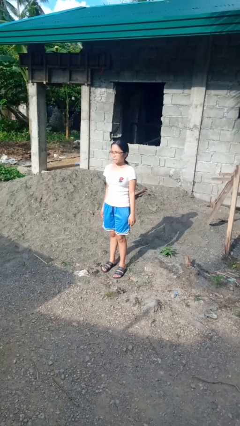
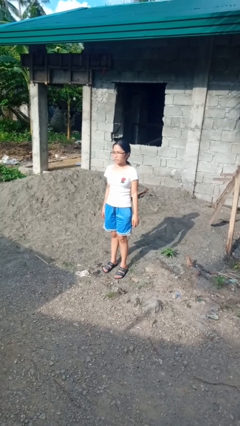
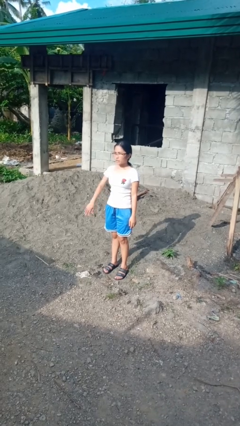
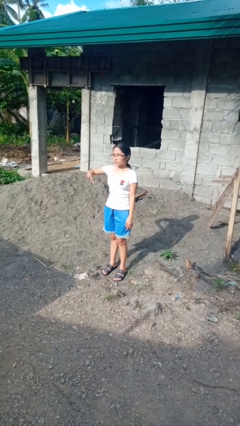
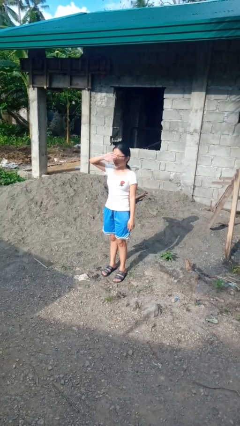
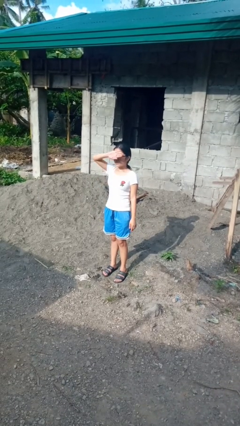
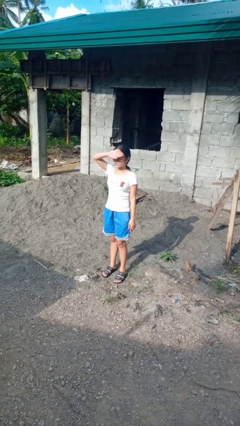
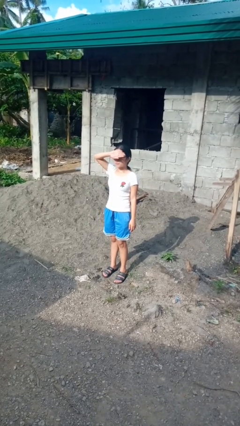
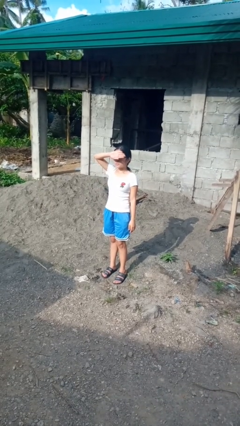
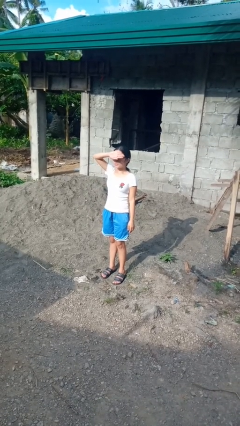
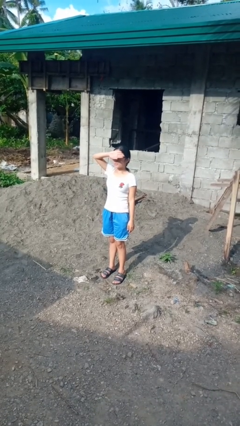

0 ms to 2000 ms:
person shades eyes

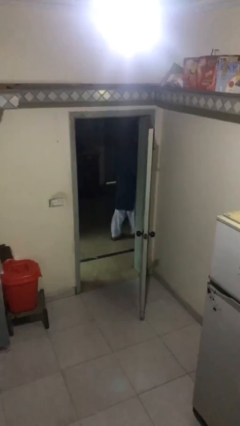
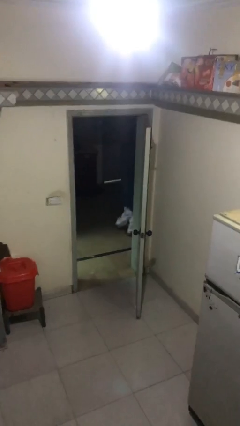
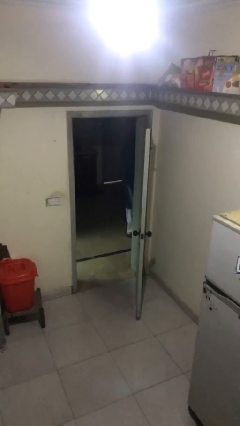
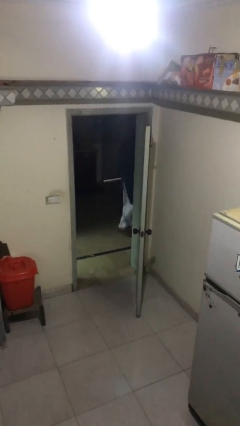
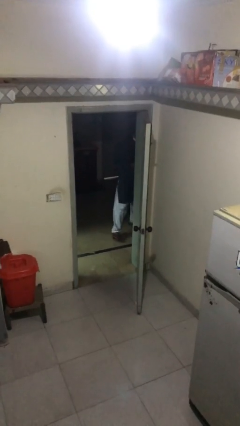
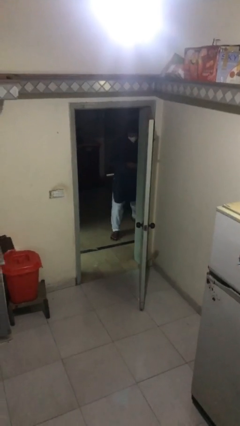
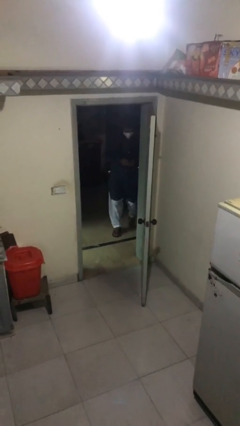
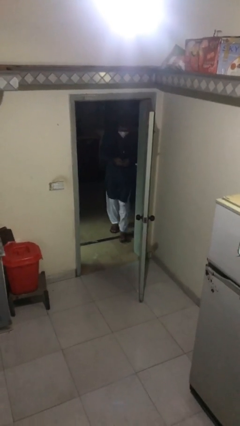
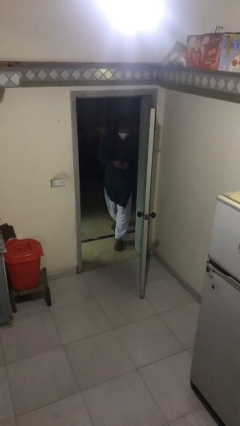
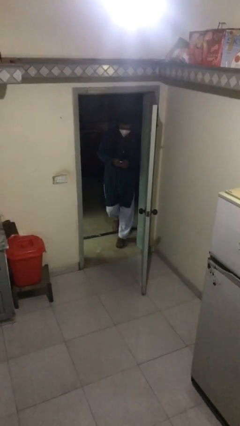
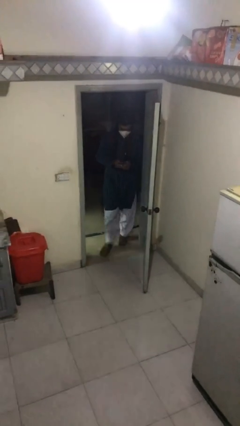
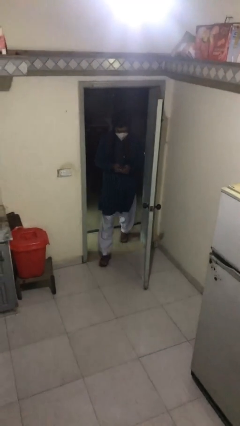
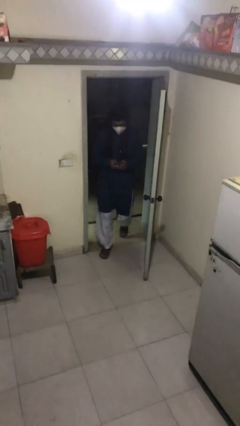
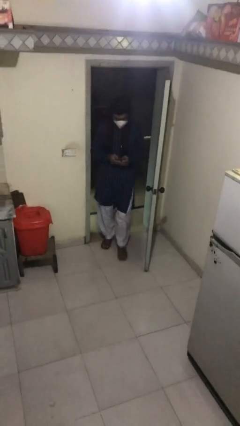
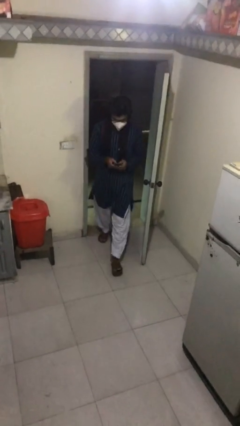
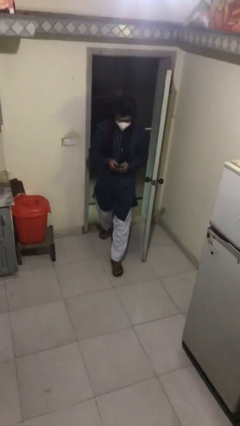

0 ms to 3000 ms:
person enters scene through structure

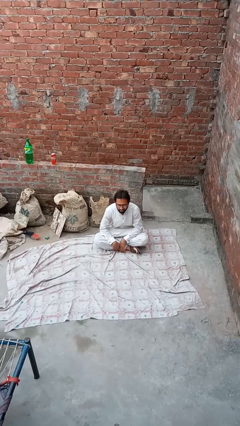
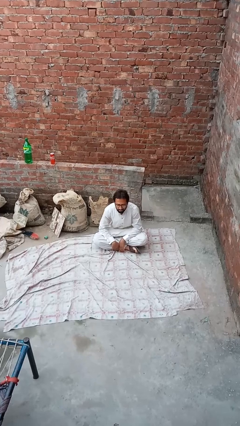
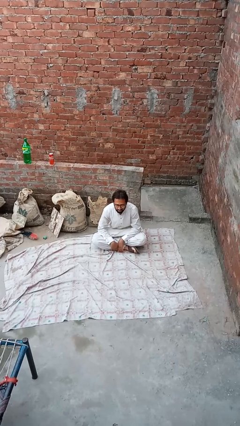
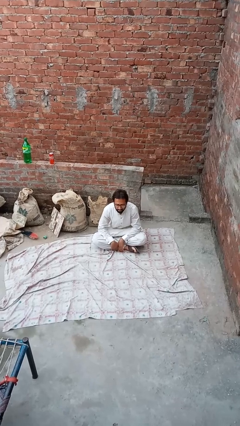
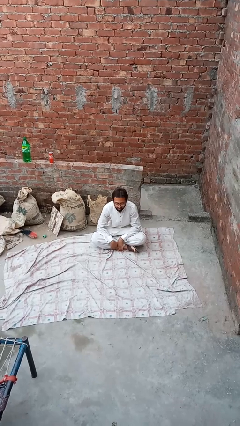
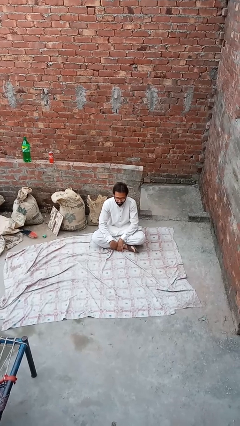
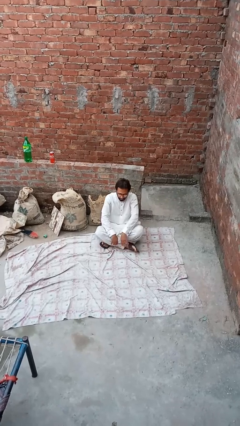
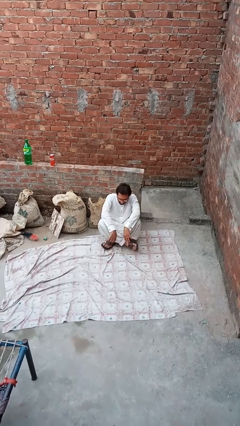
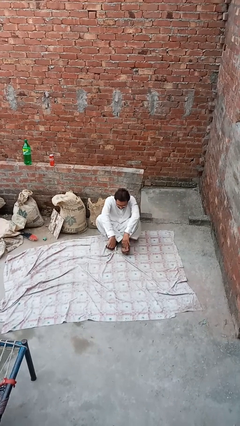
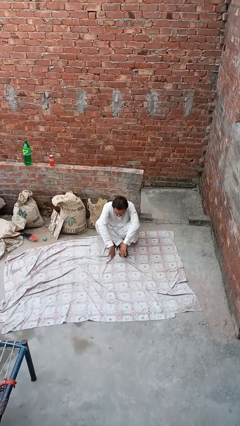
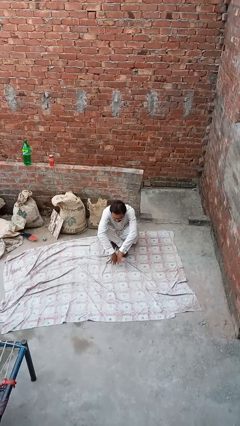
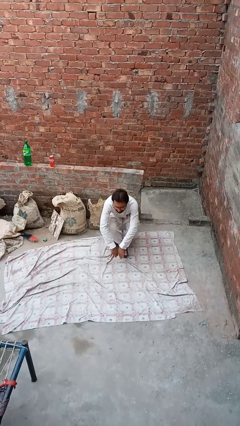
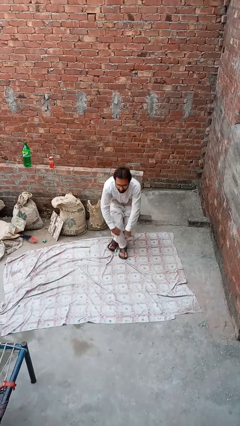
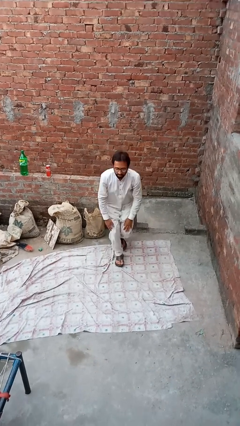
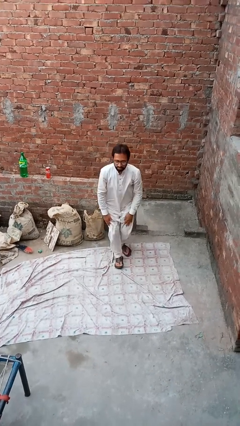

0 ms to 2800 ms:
person stands up from floor

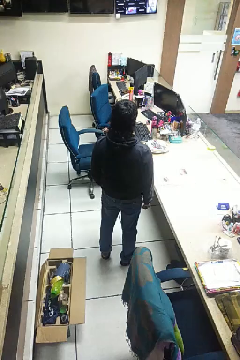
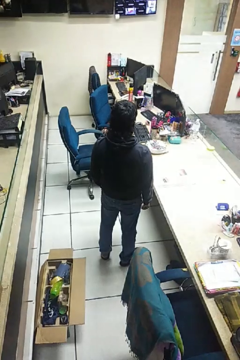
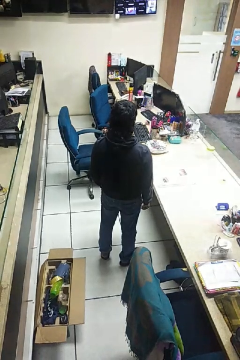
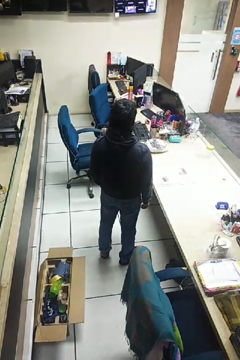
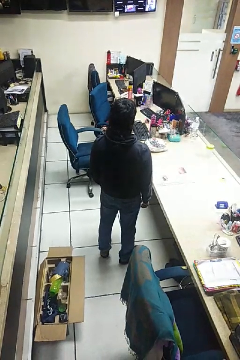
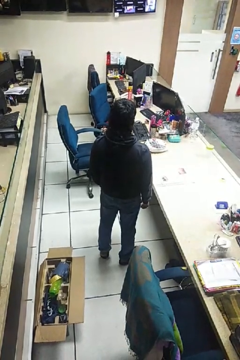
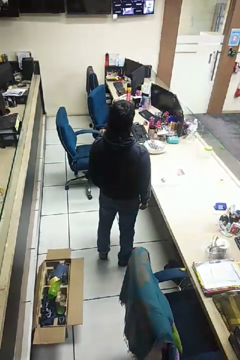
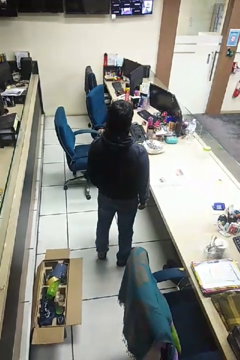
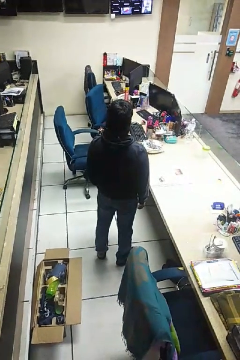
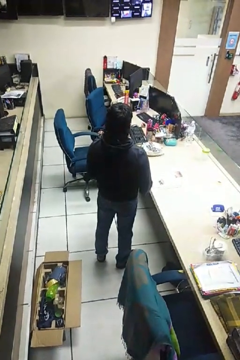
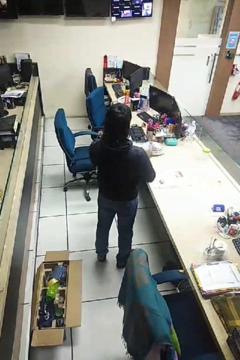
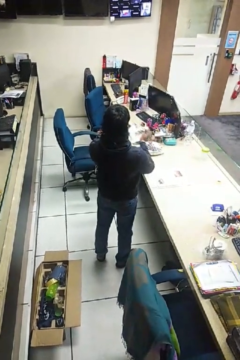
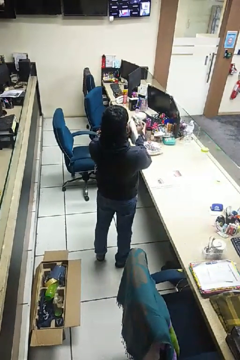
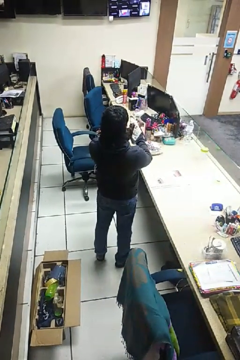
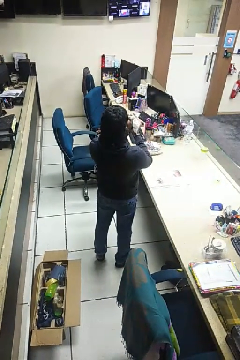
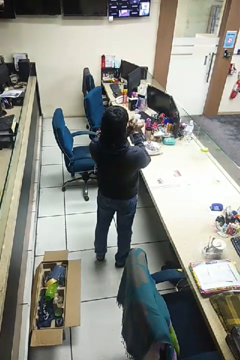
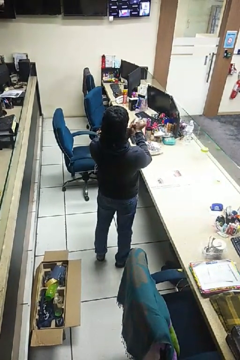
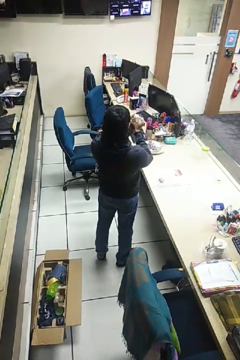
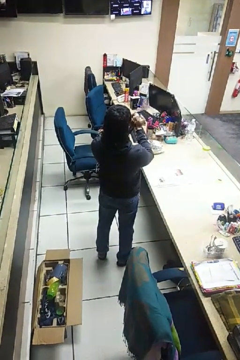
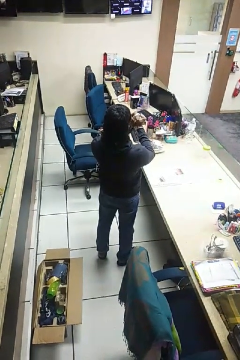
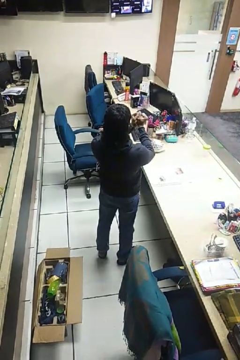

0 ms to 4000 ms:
person crumples paper

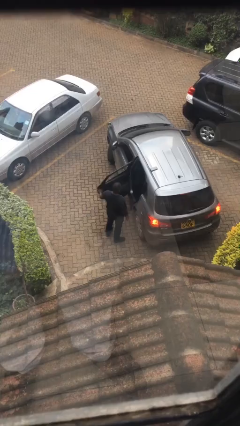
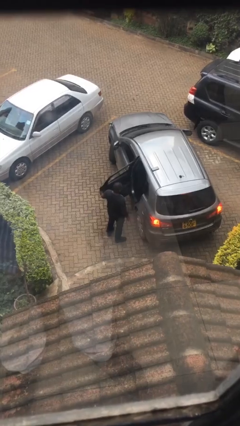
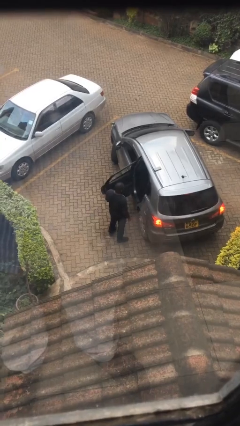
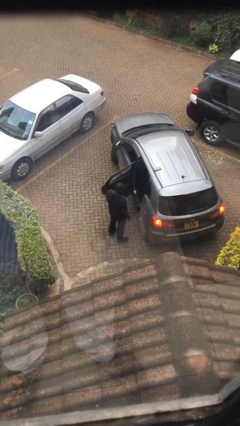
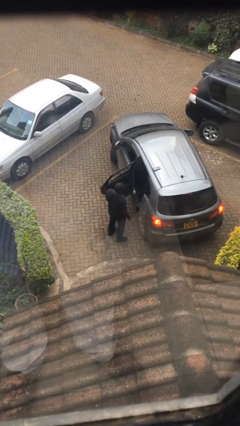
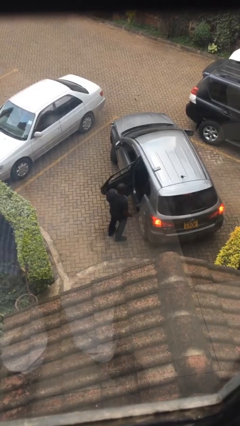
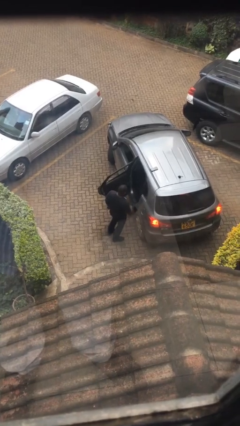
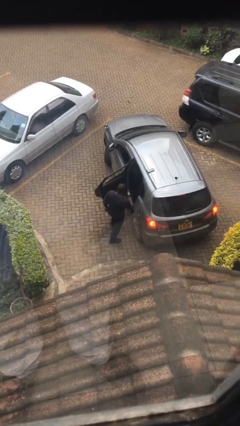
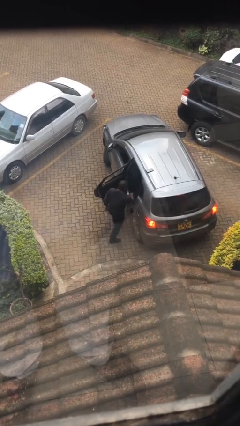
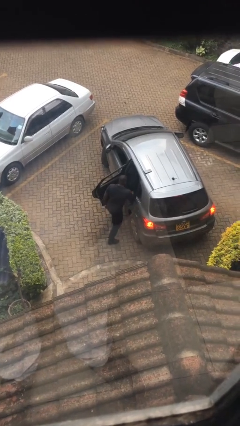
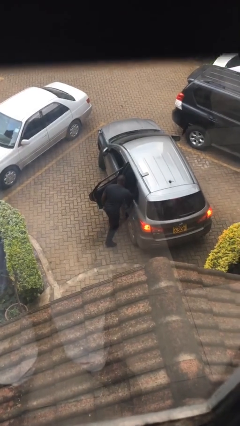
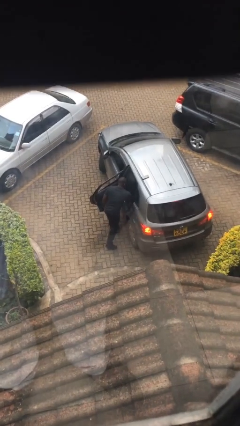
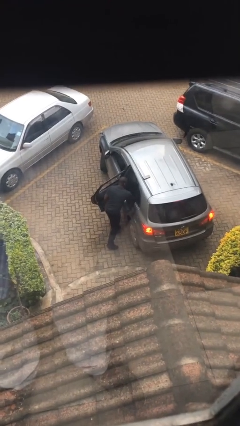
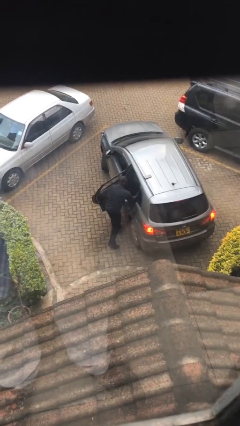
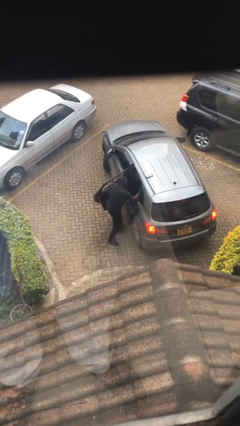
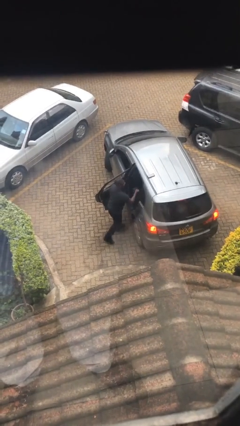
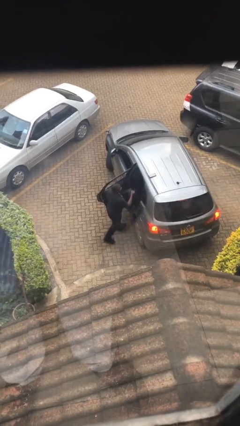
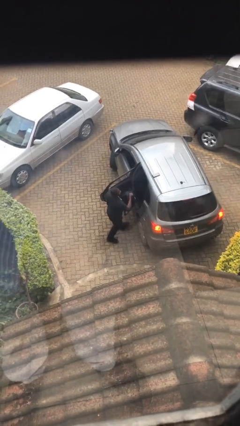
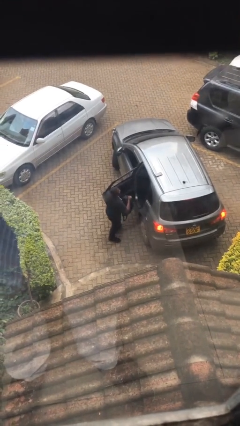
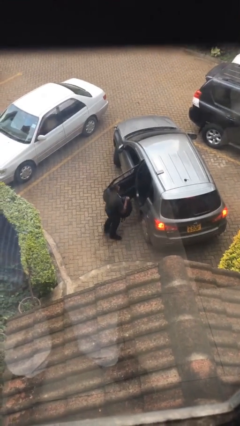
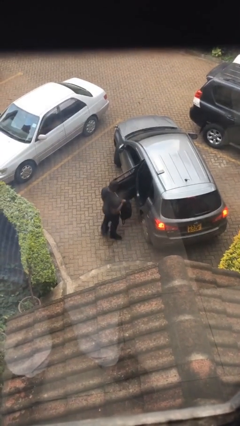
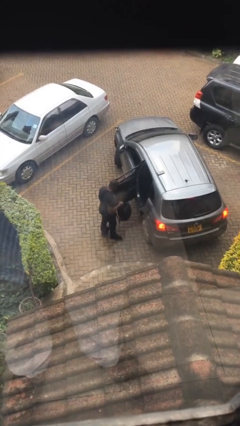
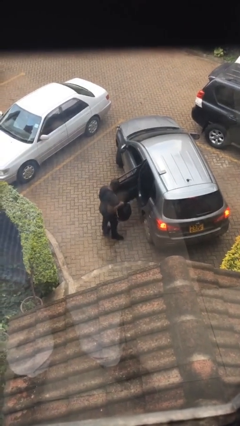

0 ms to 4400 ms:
person unloads car

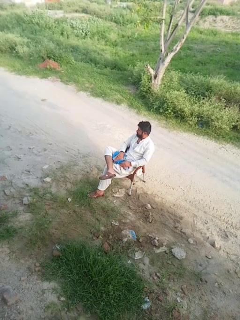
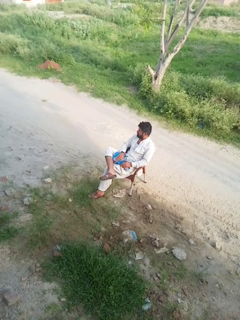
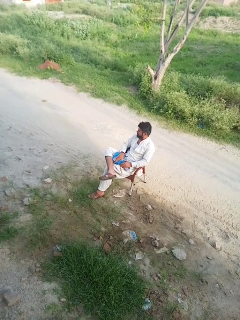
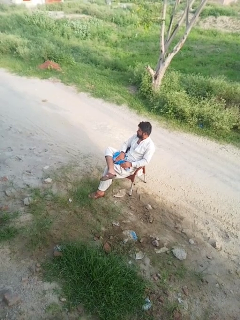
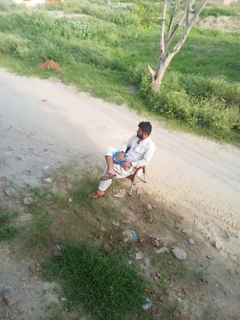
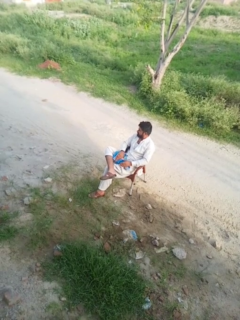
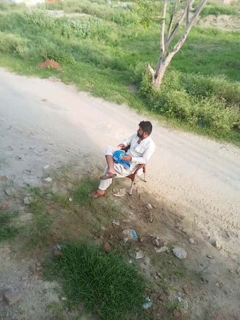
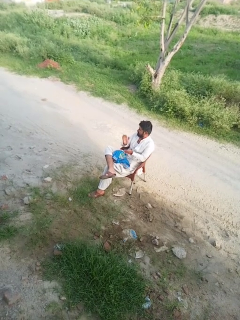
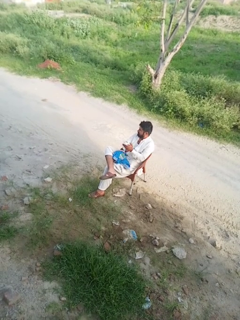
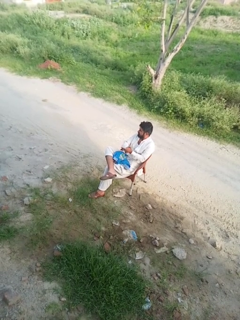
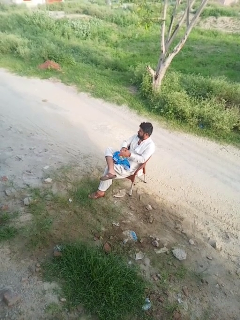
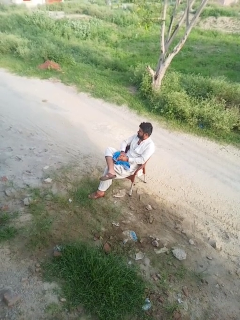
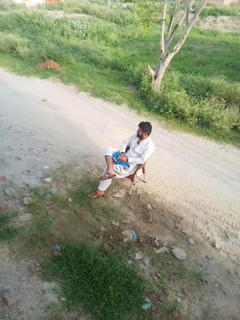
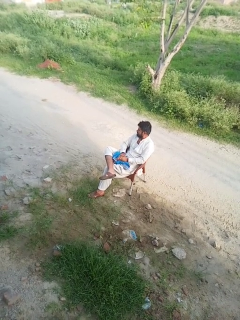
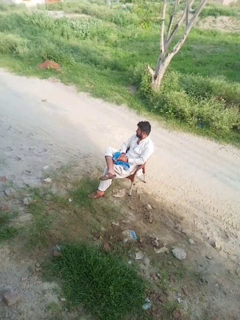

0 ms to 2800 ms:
person claps hands
